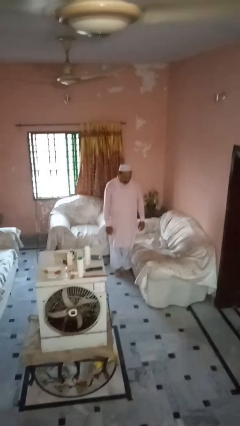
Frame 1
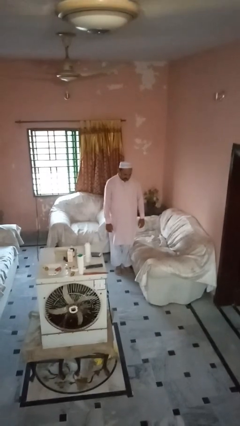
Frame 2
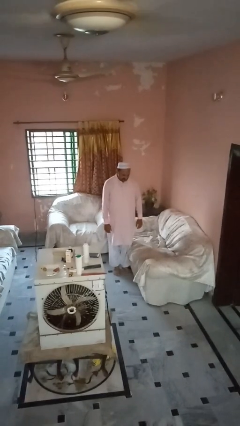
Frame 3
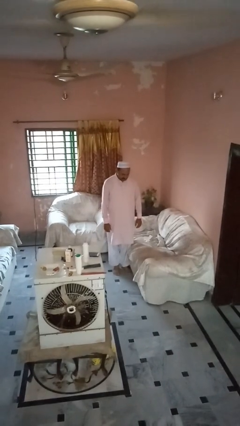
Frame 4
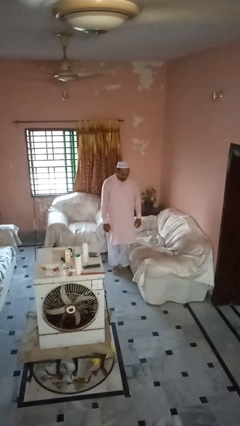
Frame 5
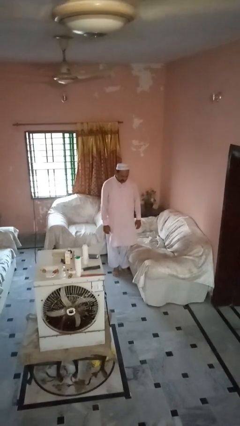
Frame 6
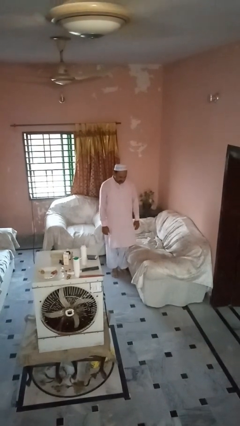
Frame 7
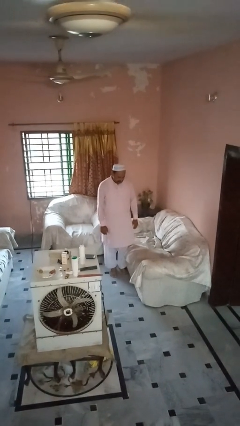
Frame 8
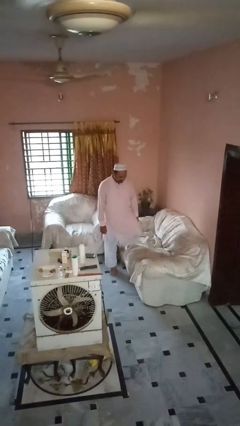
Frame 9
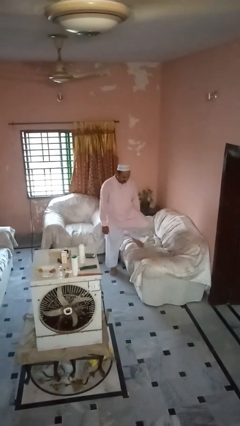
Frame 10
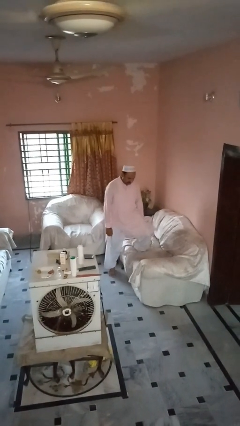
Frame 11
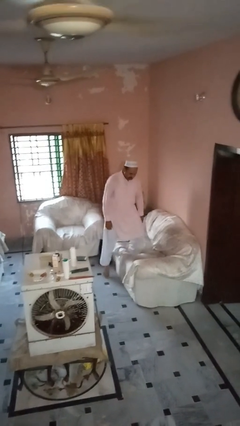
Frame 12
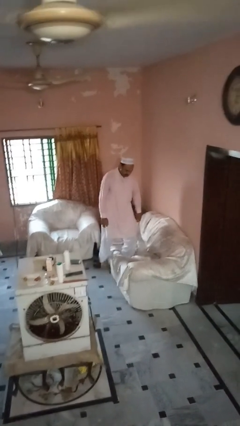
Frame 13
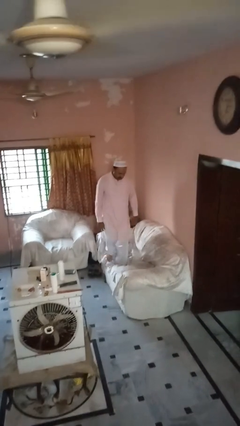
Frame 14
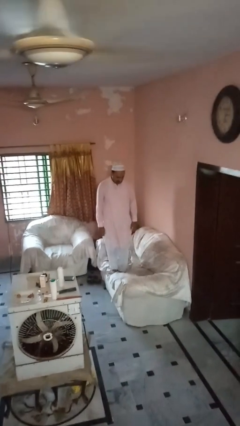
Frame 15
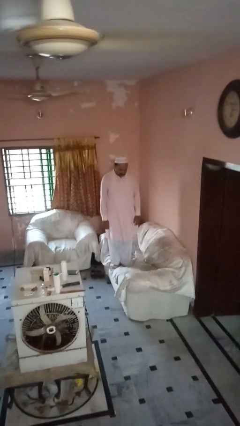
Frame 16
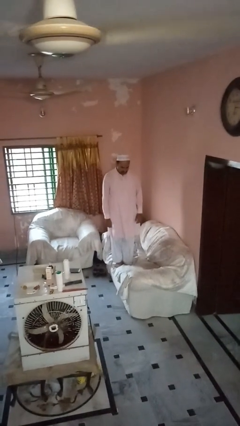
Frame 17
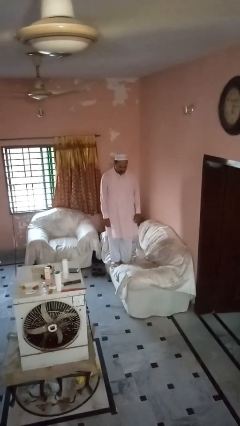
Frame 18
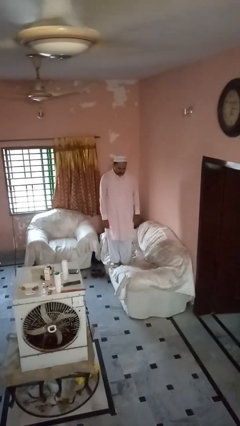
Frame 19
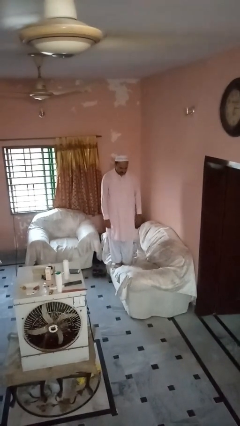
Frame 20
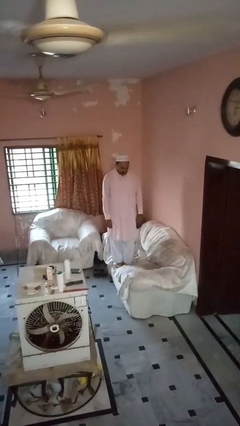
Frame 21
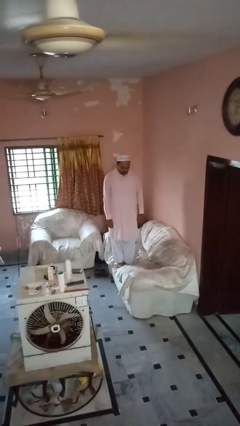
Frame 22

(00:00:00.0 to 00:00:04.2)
person climbs on couch

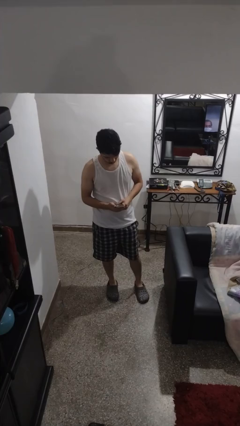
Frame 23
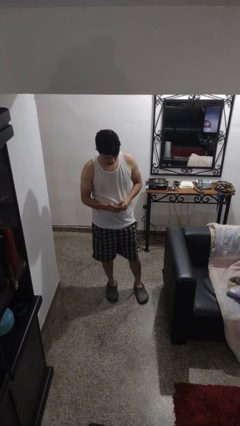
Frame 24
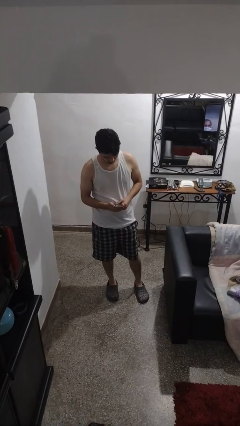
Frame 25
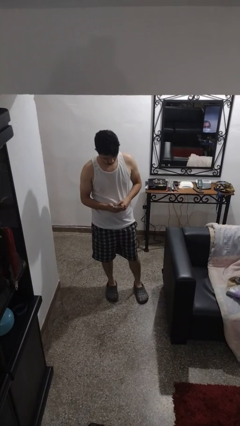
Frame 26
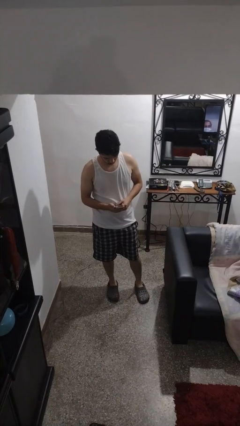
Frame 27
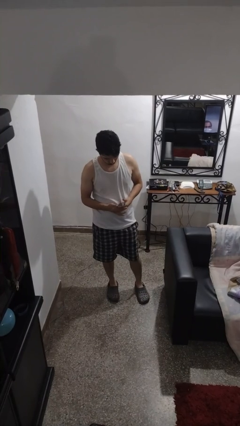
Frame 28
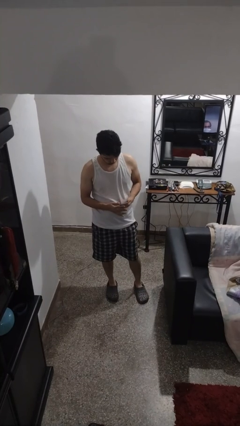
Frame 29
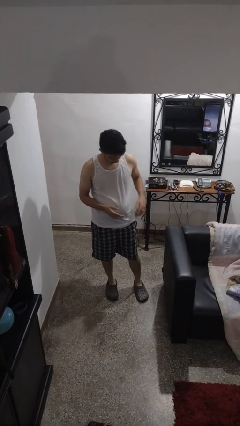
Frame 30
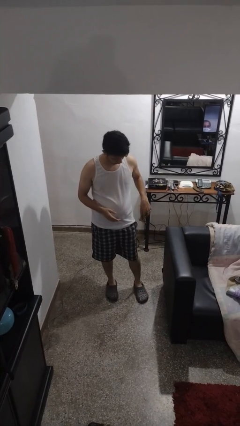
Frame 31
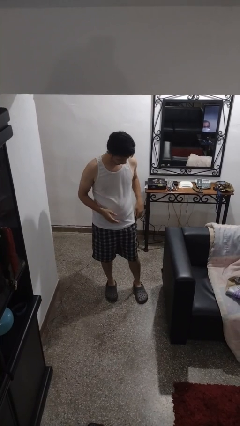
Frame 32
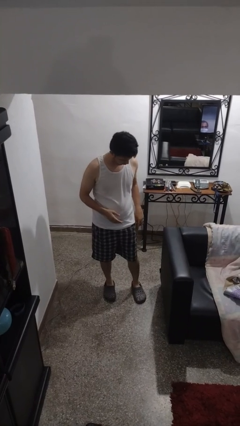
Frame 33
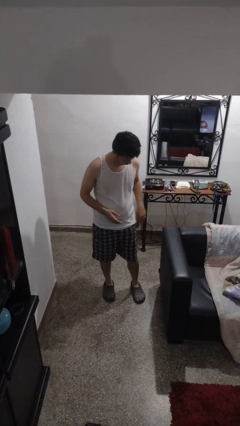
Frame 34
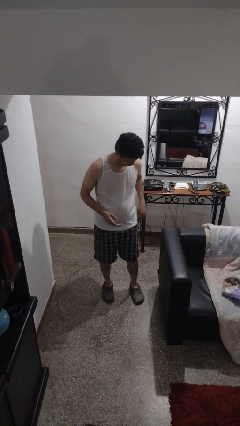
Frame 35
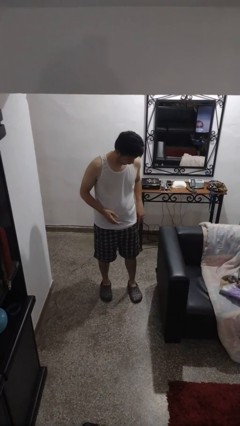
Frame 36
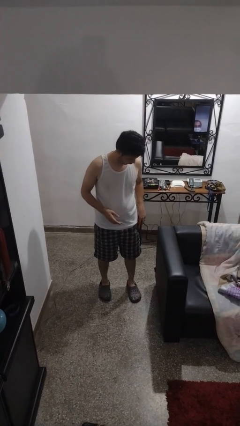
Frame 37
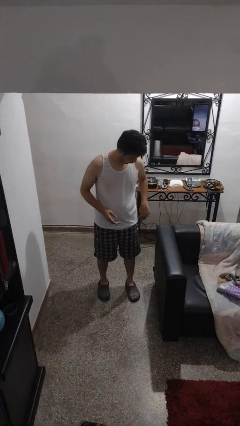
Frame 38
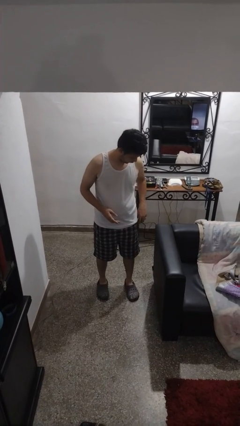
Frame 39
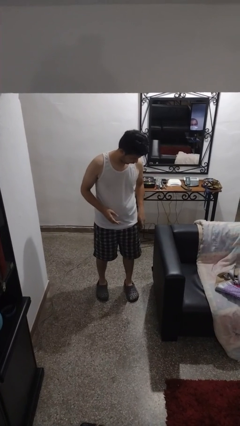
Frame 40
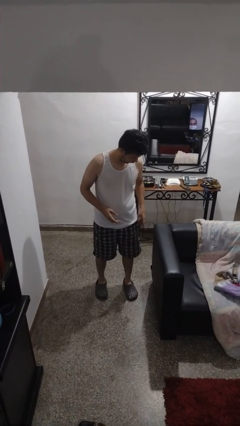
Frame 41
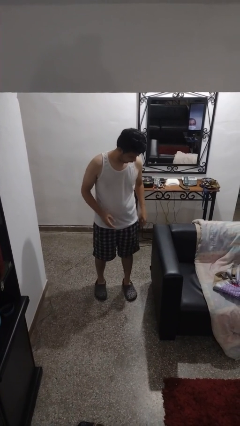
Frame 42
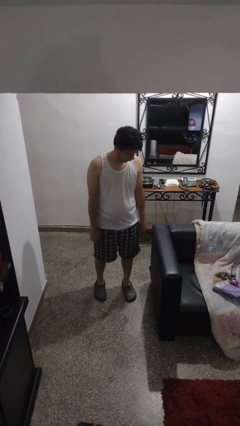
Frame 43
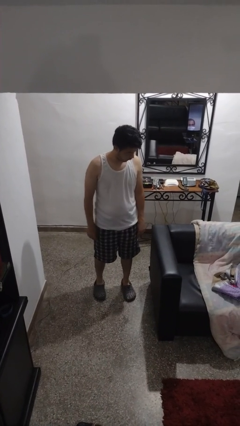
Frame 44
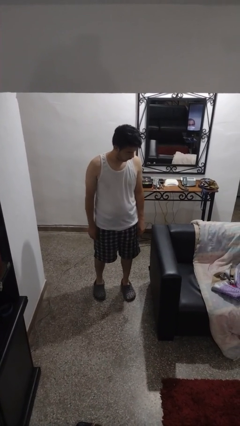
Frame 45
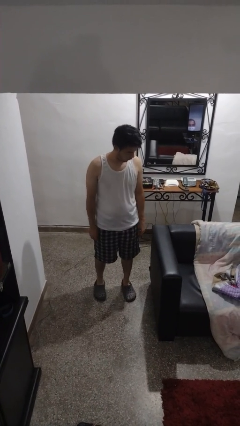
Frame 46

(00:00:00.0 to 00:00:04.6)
person puts phone into pocket

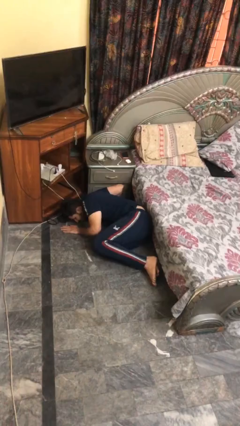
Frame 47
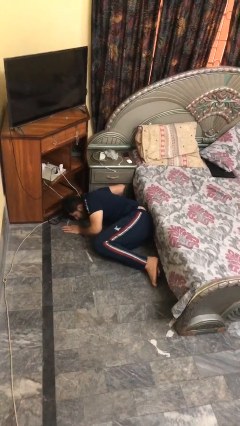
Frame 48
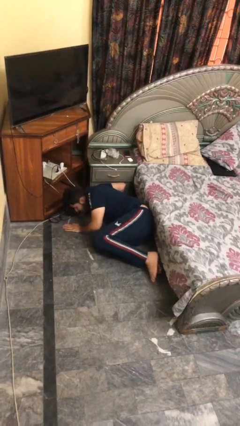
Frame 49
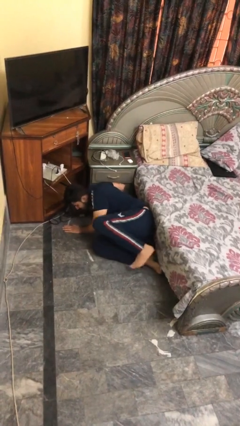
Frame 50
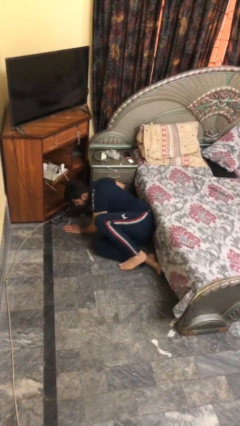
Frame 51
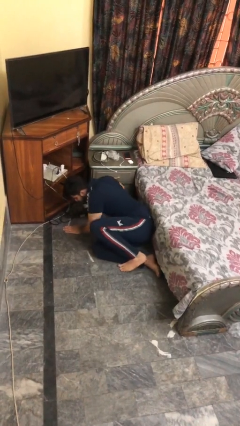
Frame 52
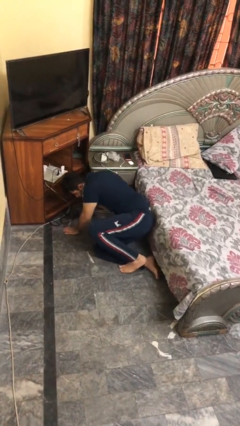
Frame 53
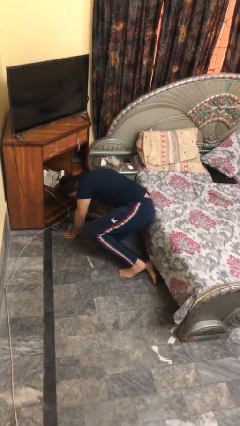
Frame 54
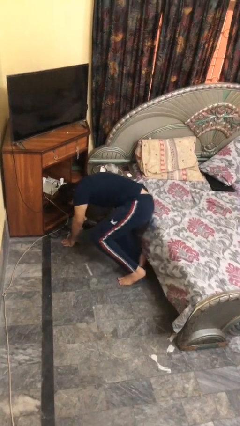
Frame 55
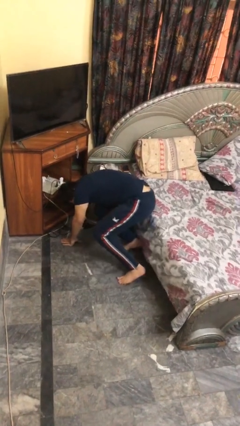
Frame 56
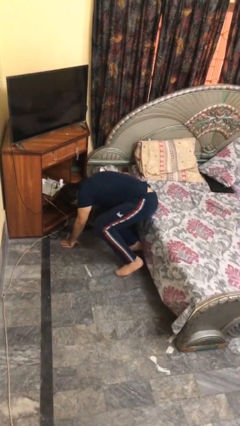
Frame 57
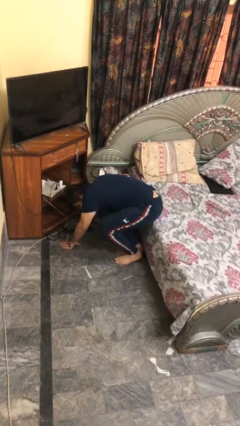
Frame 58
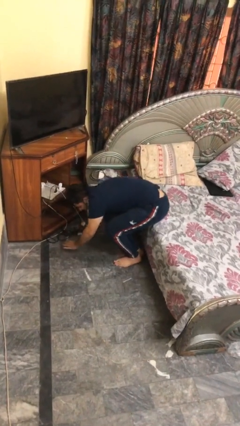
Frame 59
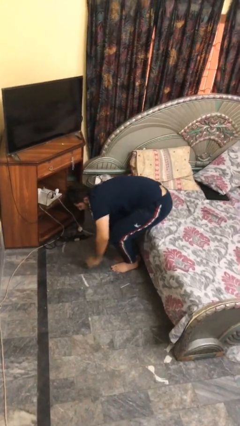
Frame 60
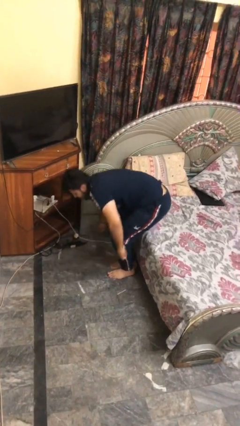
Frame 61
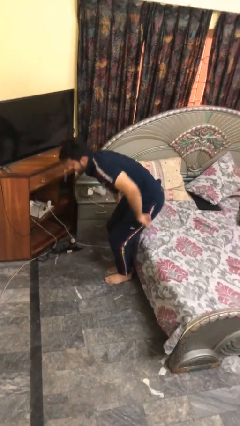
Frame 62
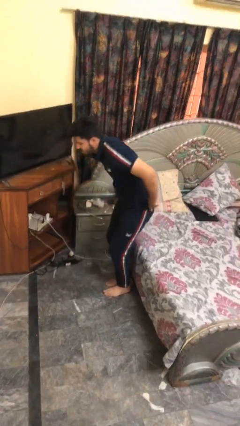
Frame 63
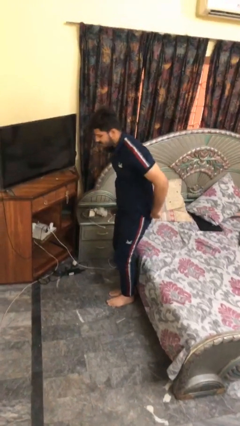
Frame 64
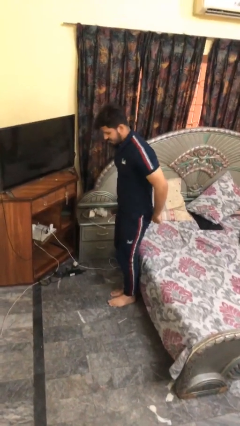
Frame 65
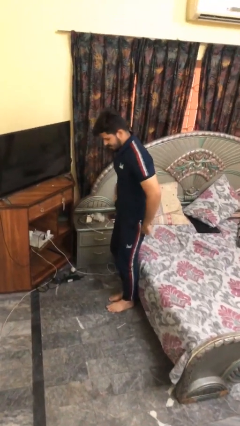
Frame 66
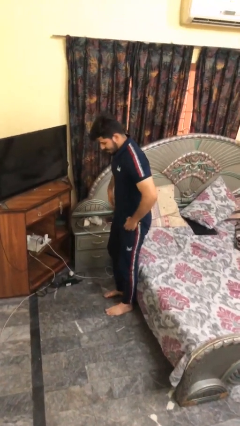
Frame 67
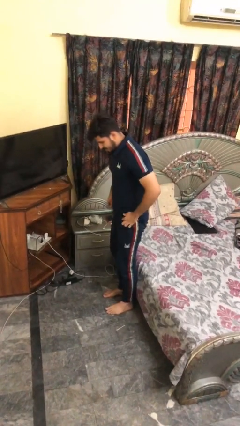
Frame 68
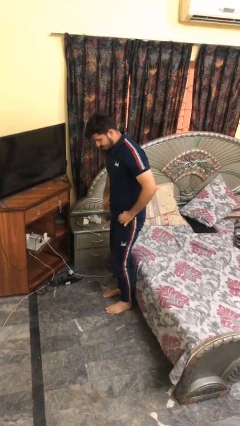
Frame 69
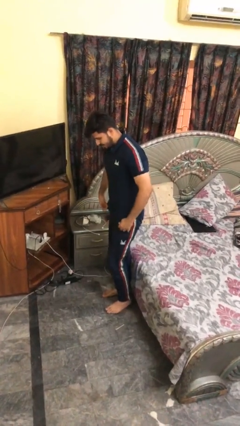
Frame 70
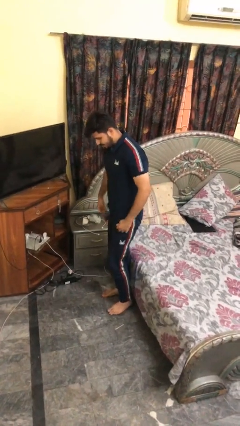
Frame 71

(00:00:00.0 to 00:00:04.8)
person stands up from floor

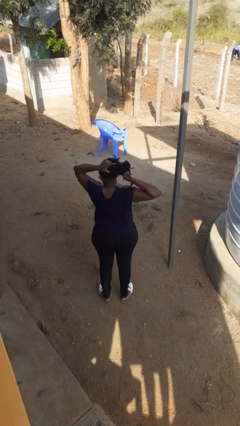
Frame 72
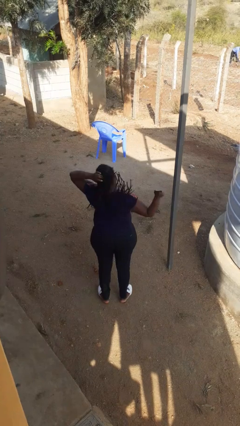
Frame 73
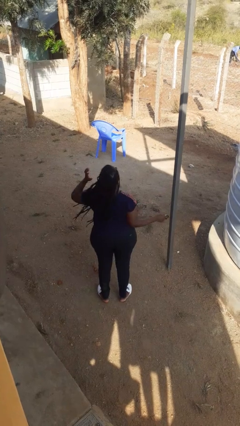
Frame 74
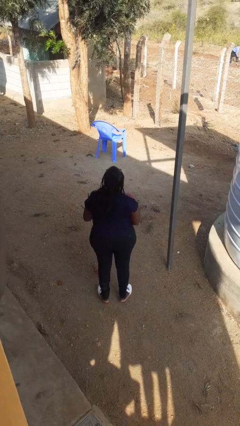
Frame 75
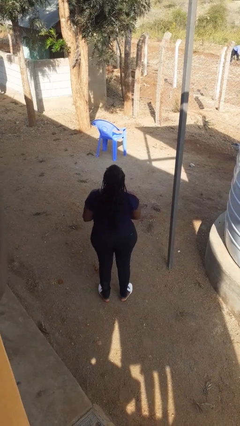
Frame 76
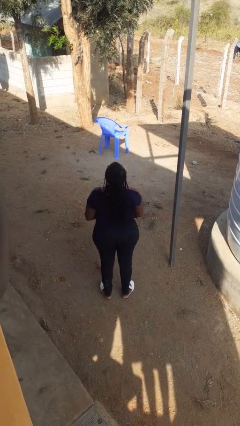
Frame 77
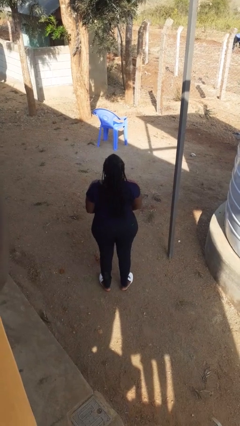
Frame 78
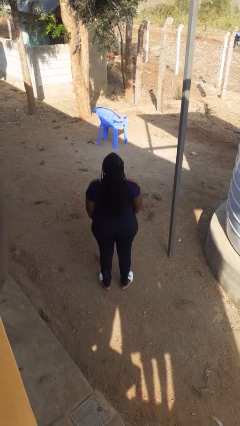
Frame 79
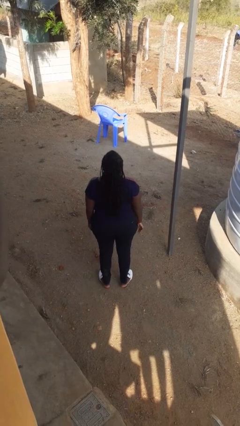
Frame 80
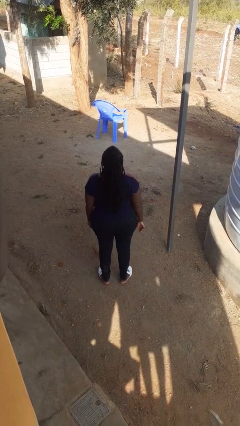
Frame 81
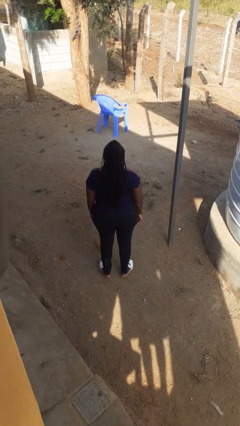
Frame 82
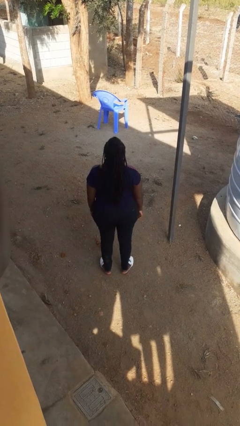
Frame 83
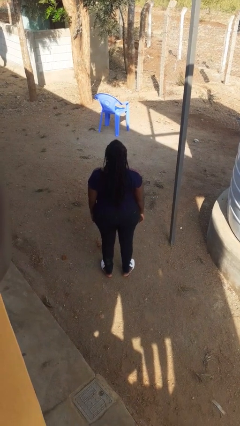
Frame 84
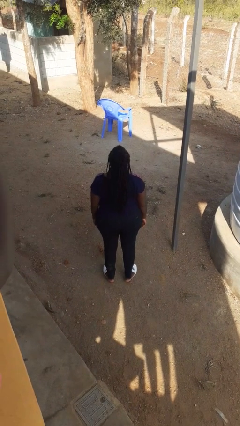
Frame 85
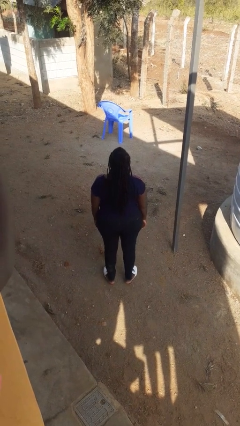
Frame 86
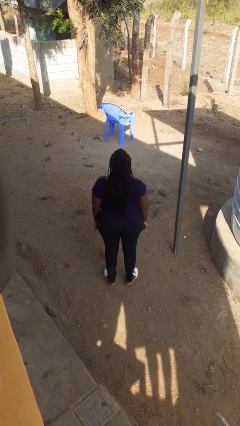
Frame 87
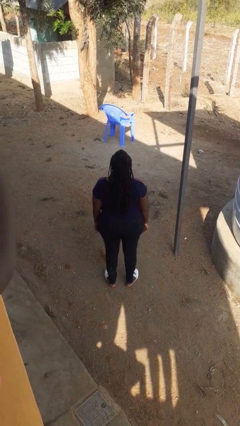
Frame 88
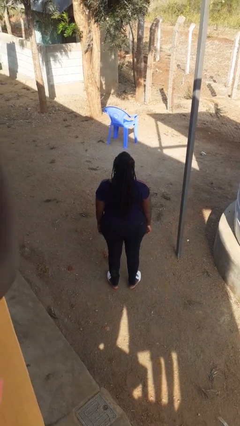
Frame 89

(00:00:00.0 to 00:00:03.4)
person takes off hairtie

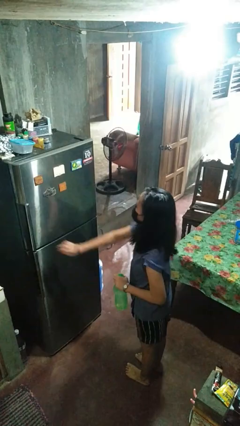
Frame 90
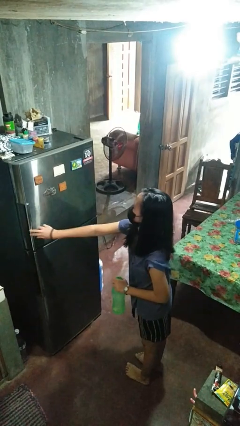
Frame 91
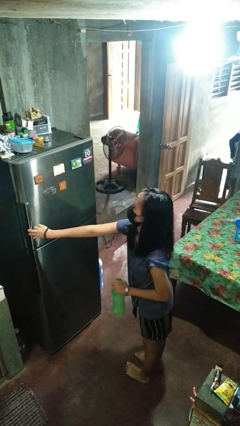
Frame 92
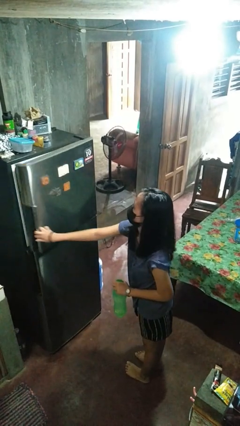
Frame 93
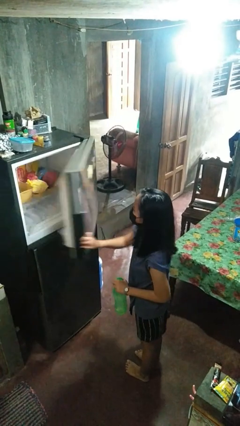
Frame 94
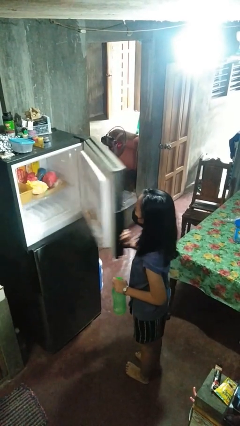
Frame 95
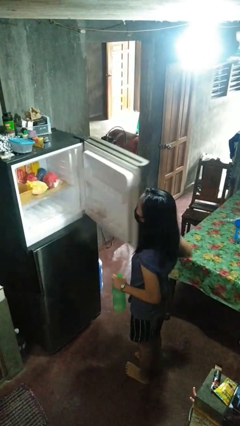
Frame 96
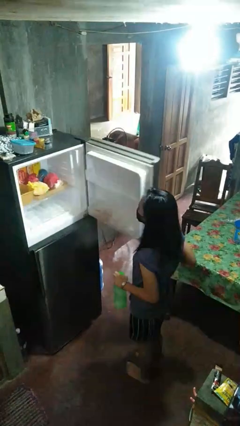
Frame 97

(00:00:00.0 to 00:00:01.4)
person opens refrigerator
